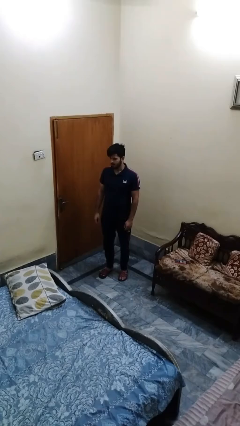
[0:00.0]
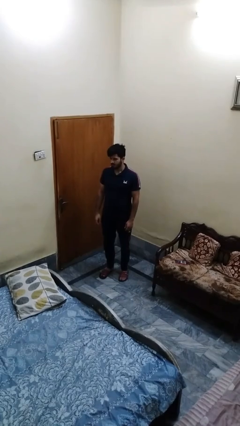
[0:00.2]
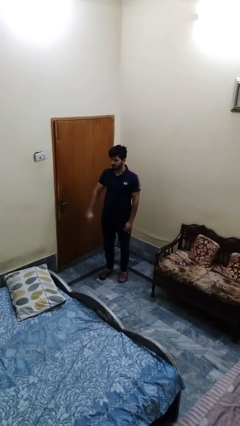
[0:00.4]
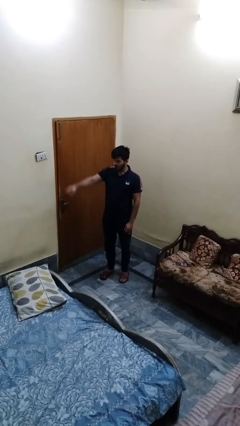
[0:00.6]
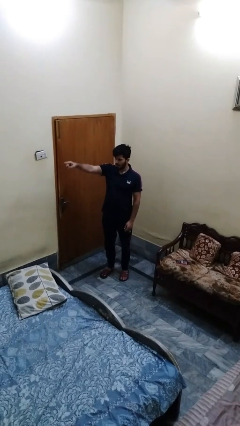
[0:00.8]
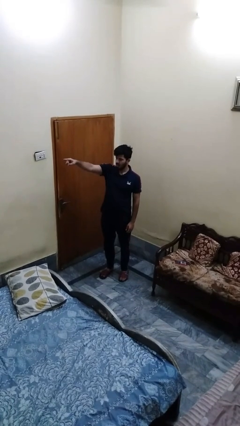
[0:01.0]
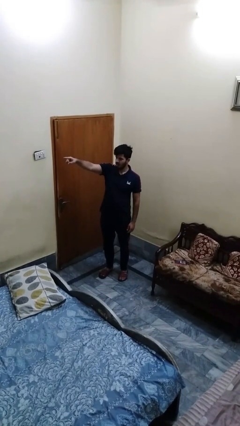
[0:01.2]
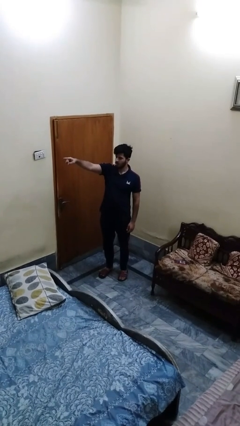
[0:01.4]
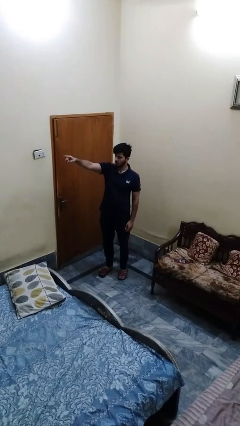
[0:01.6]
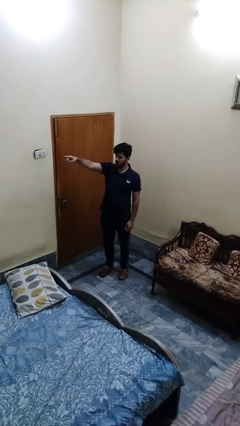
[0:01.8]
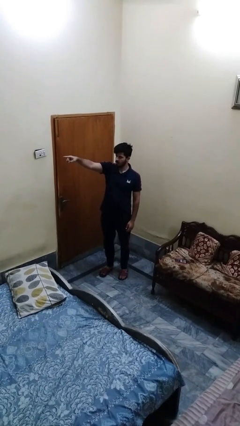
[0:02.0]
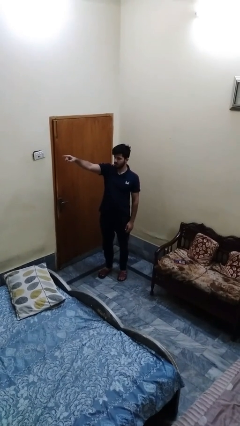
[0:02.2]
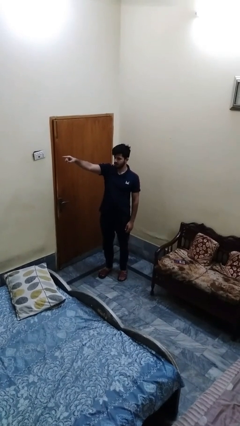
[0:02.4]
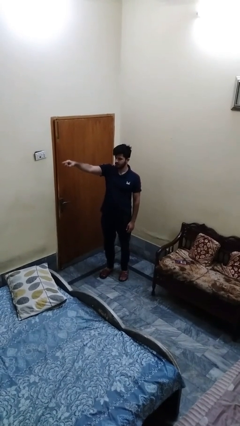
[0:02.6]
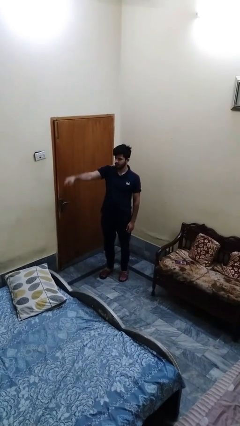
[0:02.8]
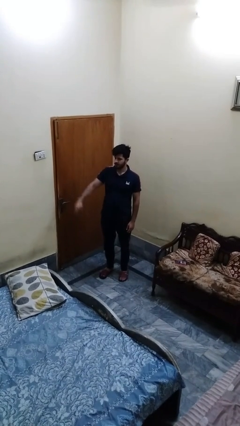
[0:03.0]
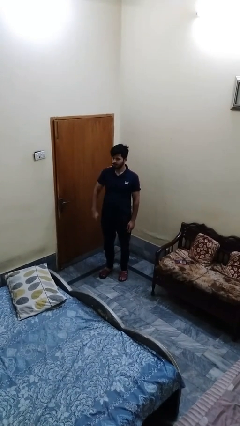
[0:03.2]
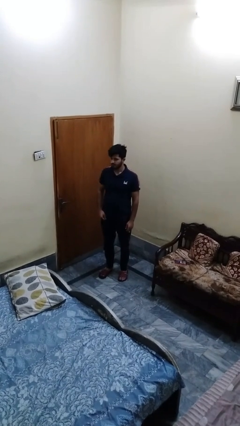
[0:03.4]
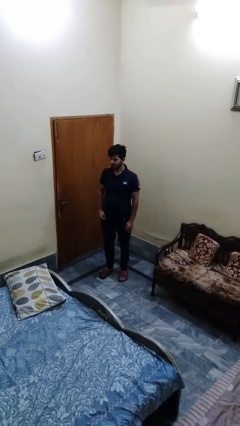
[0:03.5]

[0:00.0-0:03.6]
person points at person

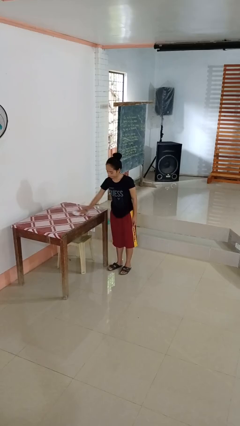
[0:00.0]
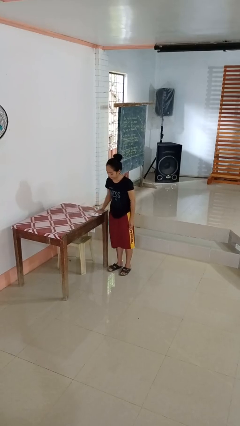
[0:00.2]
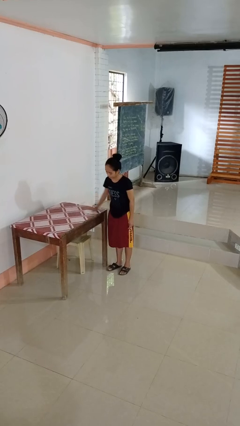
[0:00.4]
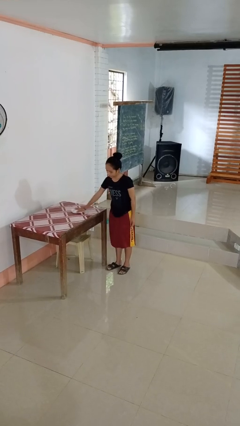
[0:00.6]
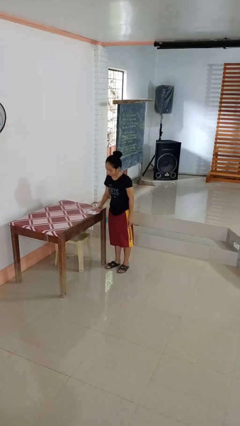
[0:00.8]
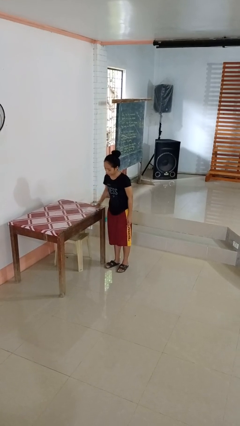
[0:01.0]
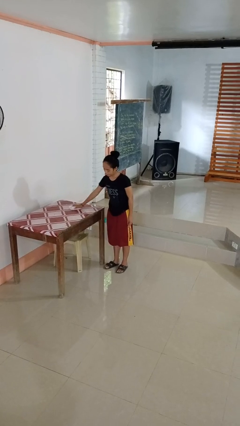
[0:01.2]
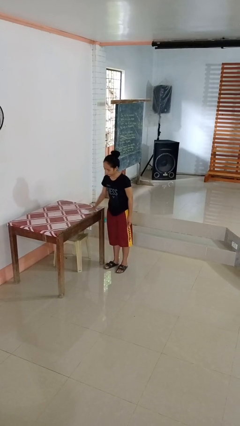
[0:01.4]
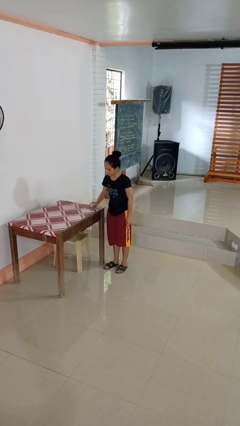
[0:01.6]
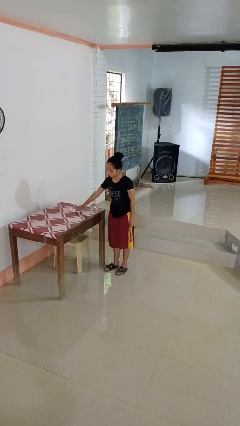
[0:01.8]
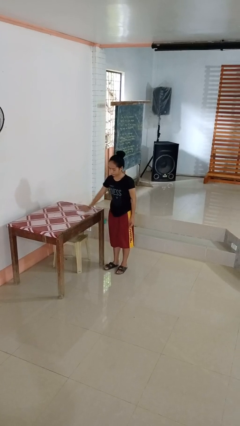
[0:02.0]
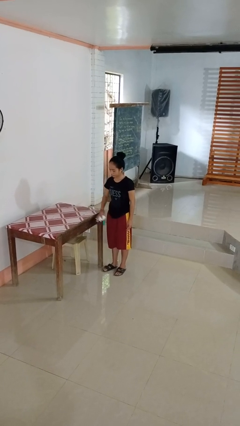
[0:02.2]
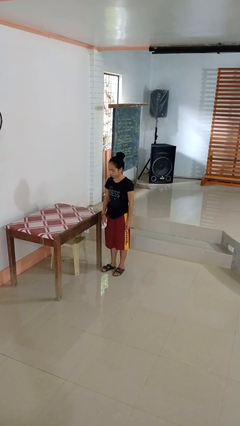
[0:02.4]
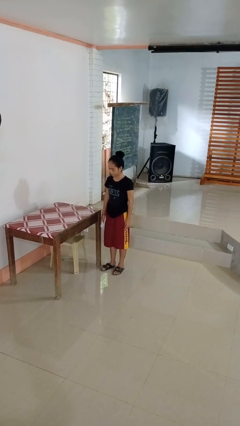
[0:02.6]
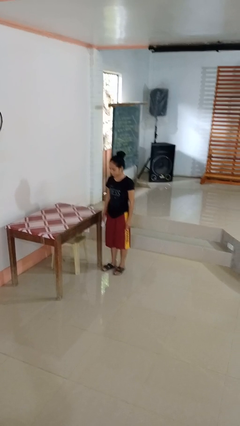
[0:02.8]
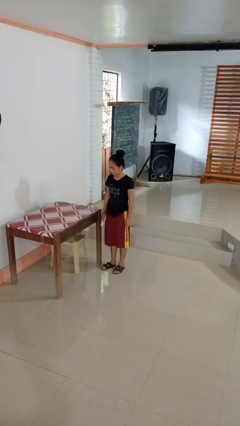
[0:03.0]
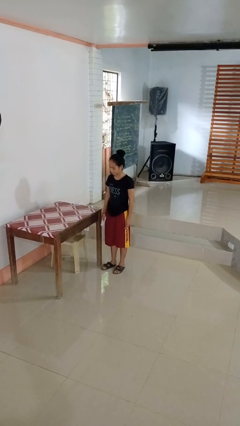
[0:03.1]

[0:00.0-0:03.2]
person cleans table with rag

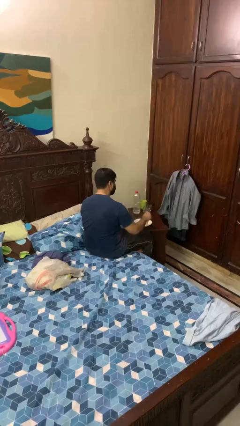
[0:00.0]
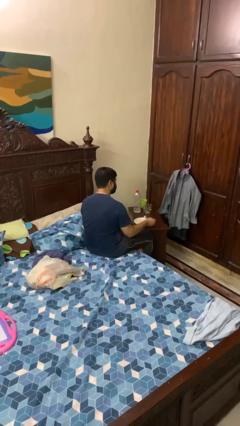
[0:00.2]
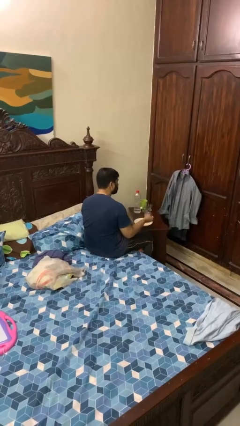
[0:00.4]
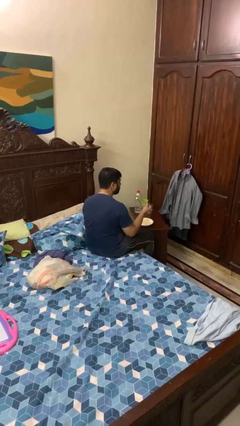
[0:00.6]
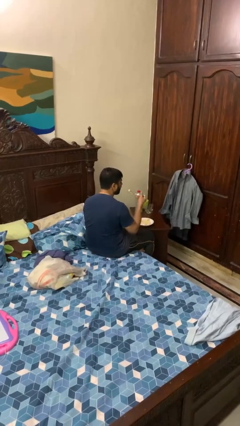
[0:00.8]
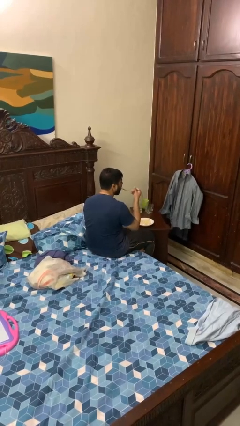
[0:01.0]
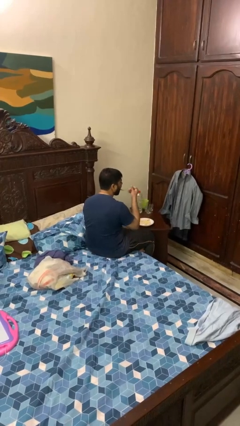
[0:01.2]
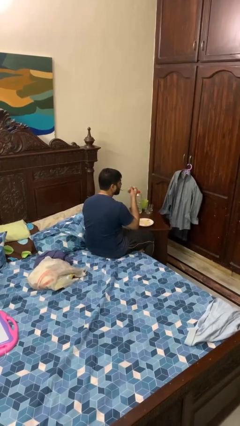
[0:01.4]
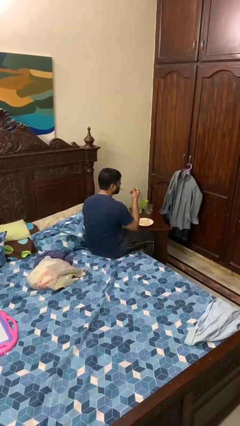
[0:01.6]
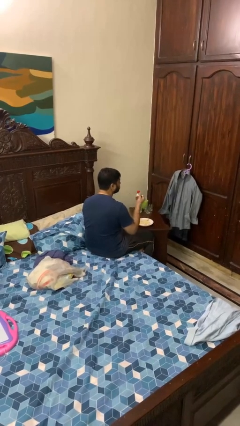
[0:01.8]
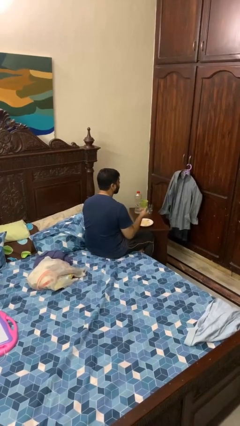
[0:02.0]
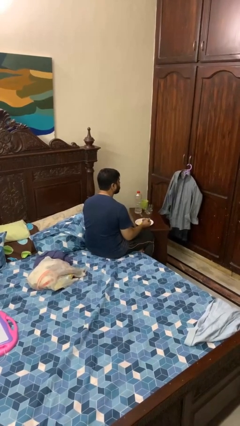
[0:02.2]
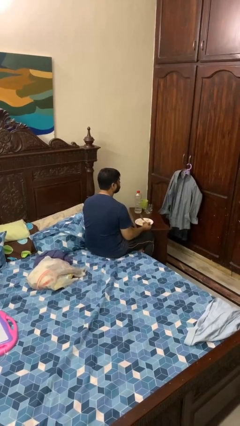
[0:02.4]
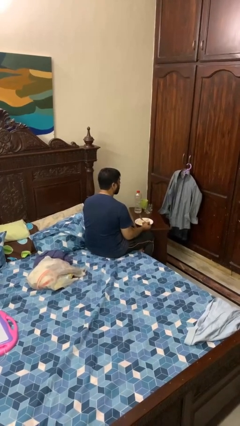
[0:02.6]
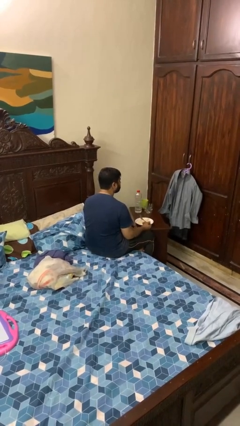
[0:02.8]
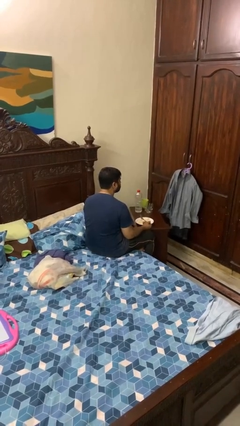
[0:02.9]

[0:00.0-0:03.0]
person eats with utensil

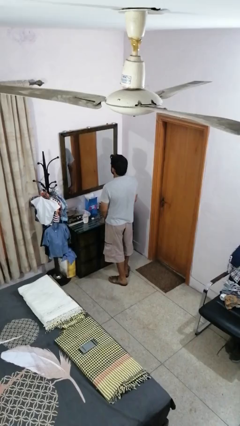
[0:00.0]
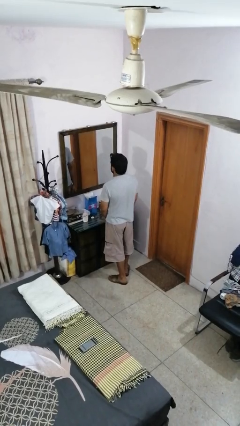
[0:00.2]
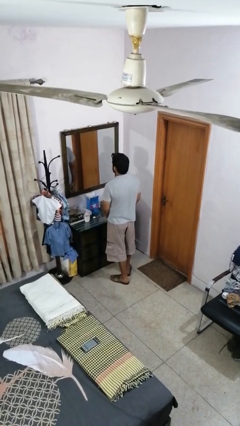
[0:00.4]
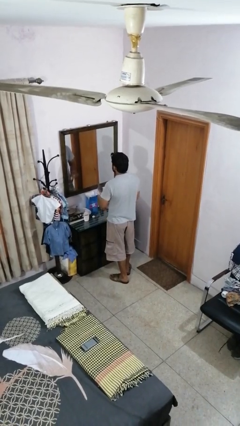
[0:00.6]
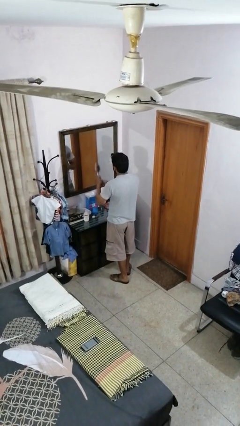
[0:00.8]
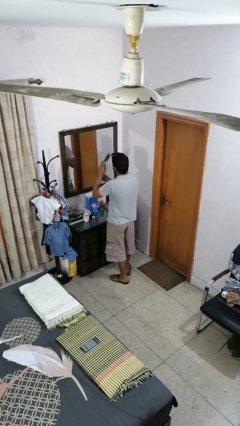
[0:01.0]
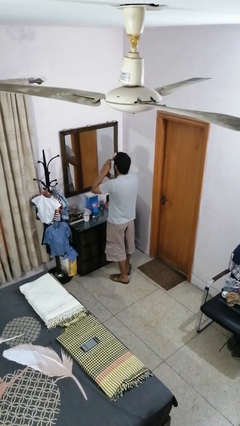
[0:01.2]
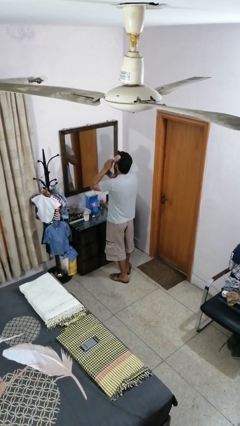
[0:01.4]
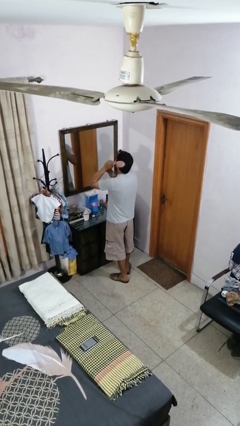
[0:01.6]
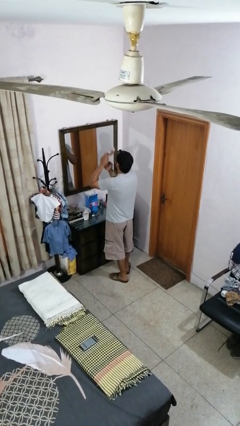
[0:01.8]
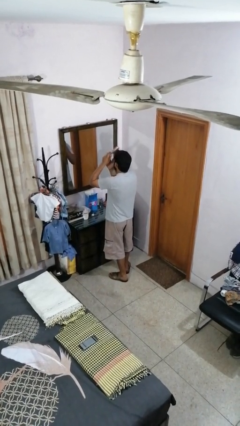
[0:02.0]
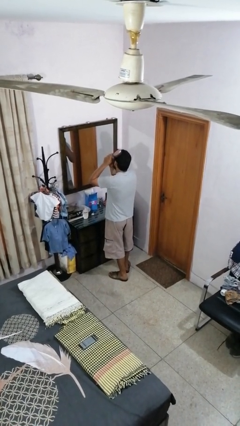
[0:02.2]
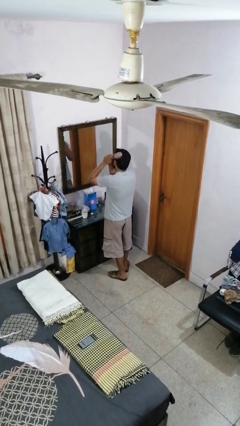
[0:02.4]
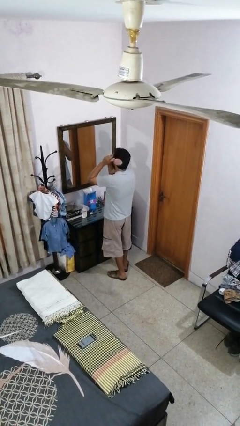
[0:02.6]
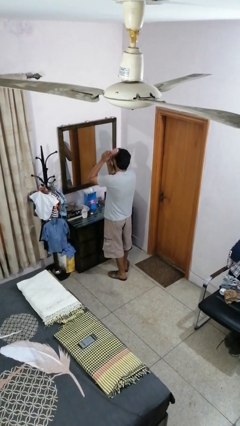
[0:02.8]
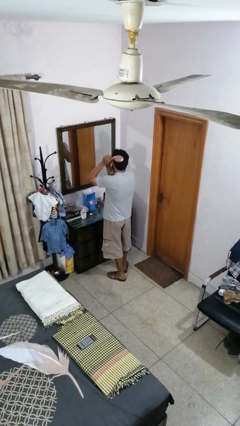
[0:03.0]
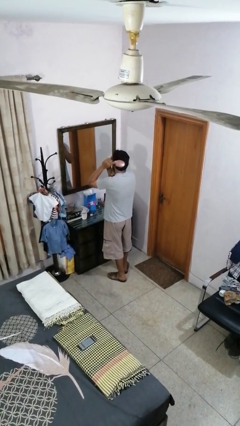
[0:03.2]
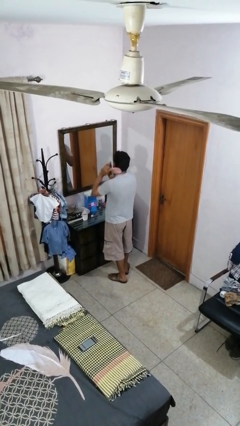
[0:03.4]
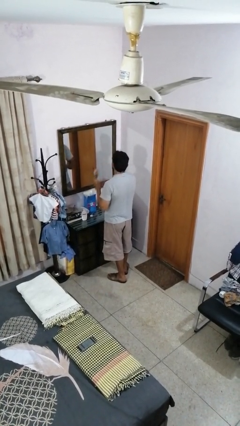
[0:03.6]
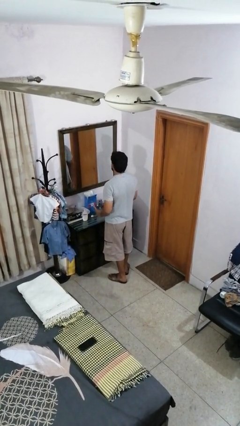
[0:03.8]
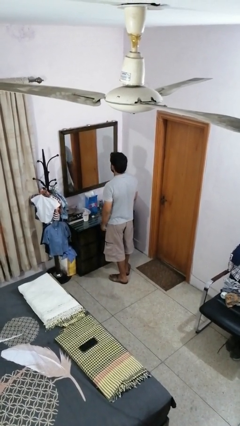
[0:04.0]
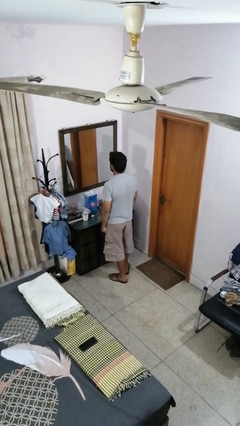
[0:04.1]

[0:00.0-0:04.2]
person brushes hair

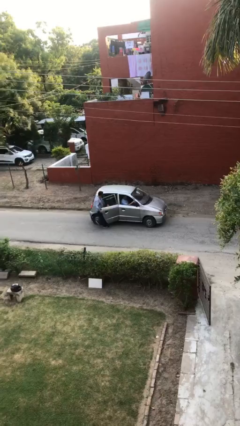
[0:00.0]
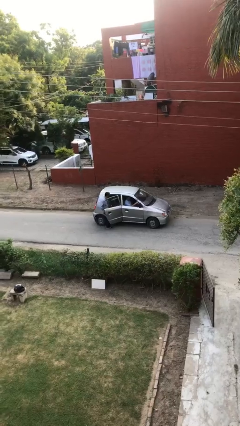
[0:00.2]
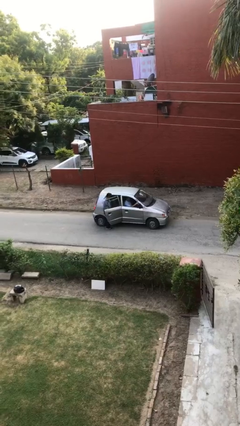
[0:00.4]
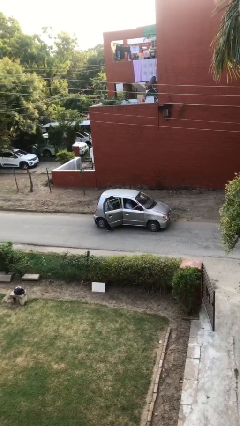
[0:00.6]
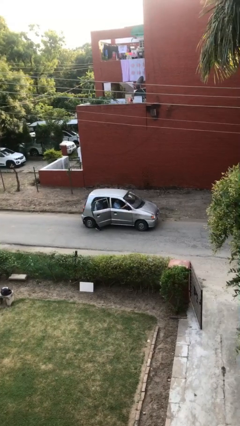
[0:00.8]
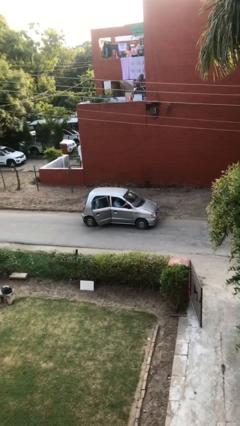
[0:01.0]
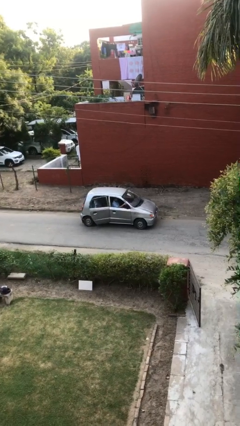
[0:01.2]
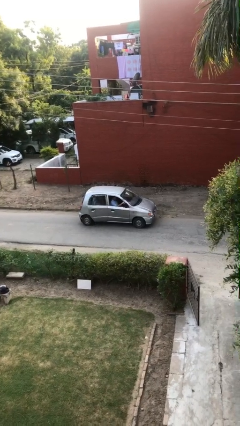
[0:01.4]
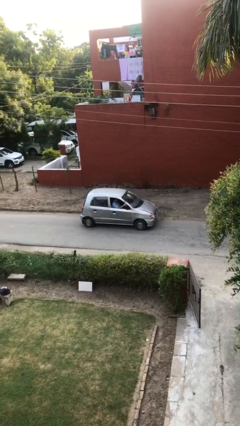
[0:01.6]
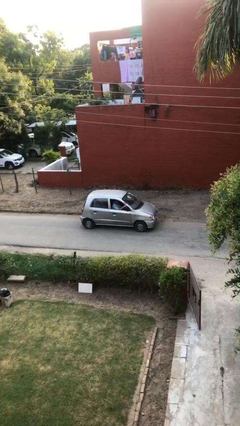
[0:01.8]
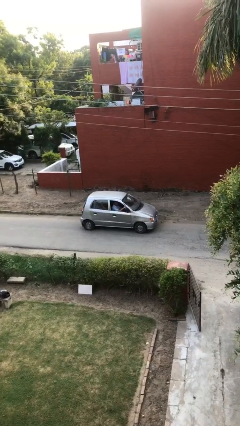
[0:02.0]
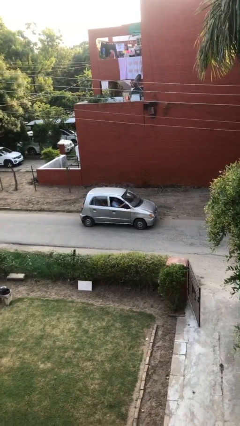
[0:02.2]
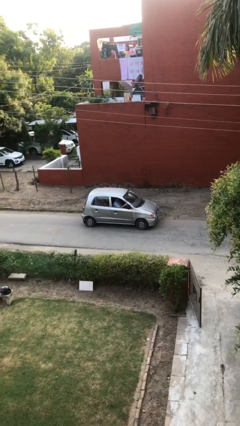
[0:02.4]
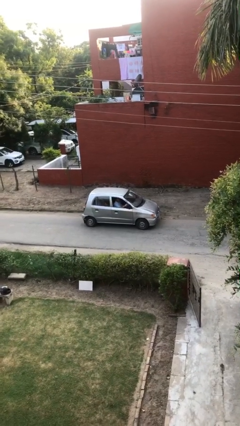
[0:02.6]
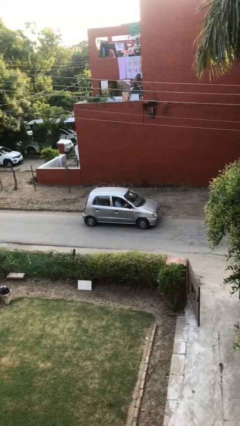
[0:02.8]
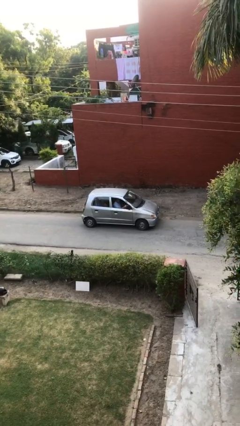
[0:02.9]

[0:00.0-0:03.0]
car picks up person

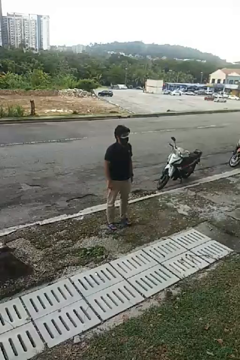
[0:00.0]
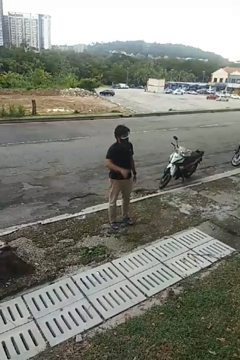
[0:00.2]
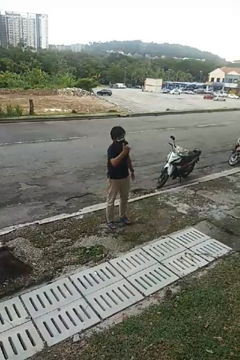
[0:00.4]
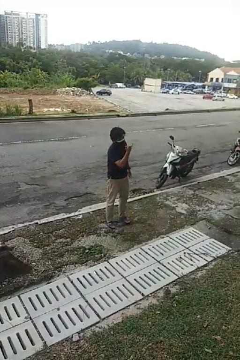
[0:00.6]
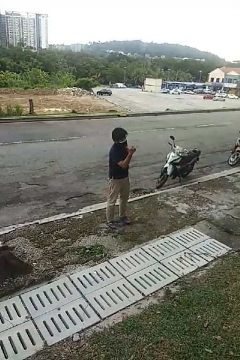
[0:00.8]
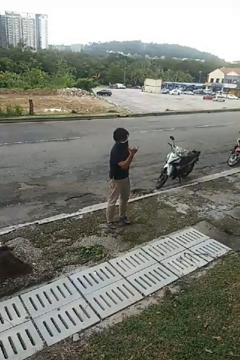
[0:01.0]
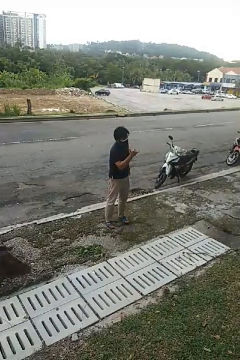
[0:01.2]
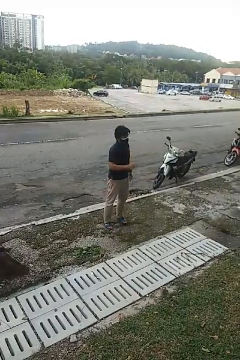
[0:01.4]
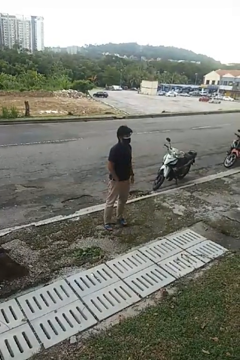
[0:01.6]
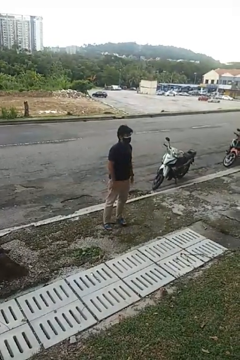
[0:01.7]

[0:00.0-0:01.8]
person gestures hang loose
